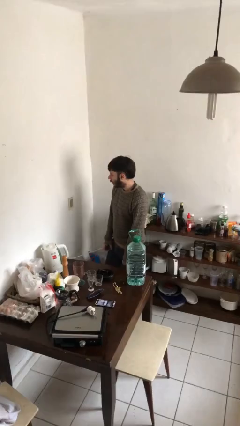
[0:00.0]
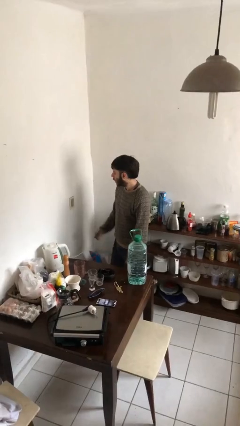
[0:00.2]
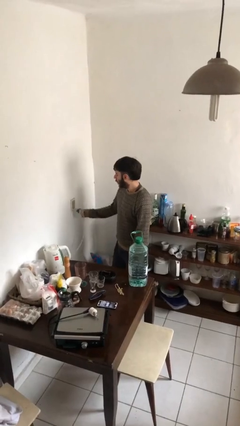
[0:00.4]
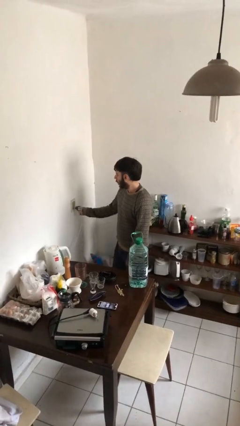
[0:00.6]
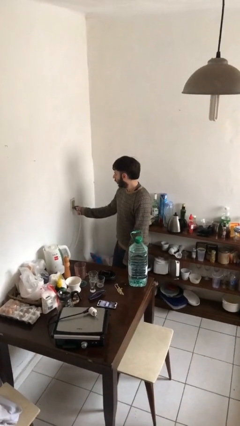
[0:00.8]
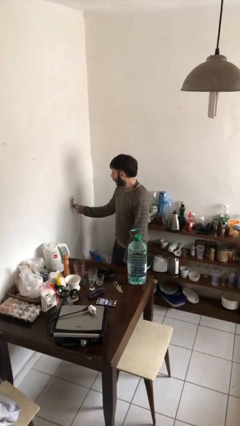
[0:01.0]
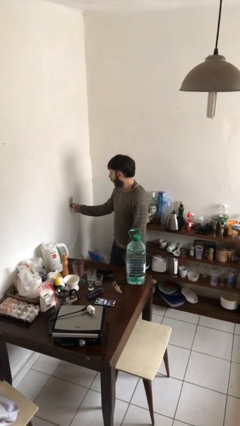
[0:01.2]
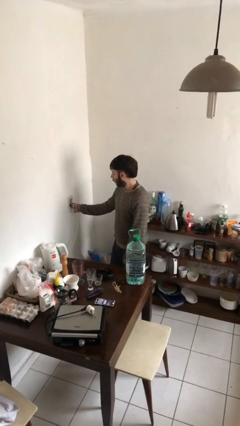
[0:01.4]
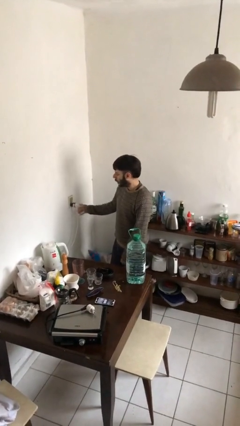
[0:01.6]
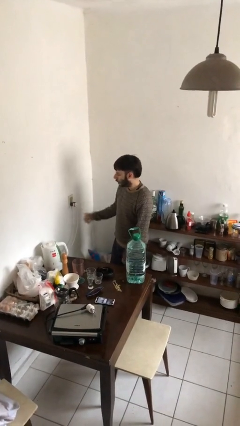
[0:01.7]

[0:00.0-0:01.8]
person plugs into electrical socket

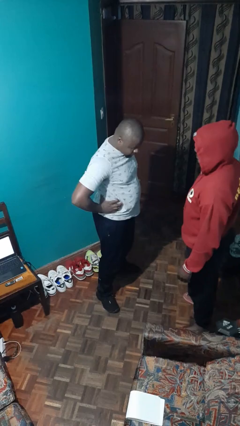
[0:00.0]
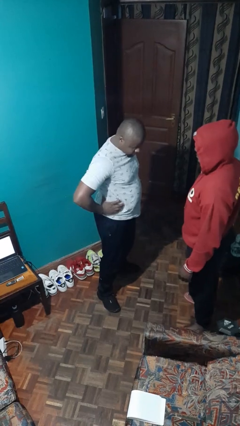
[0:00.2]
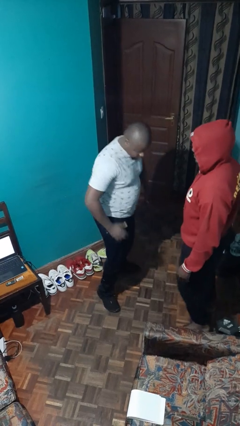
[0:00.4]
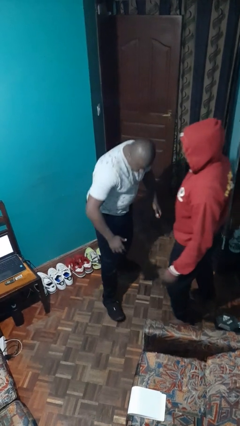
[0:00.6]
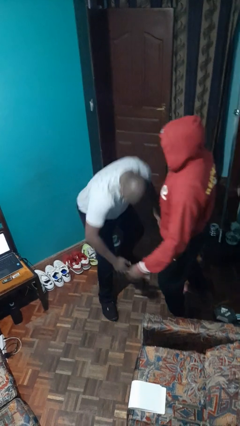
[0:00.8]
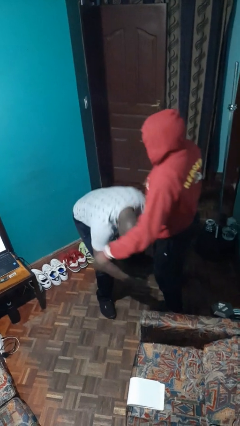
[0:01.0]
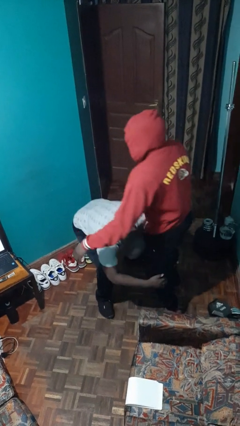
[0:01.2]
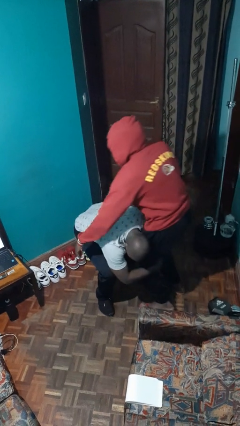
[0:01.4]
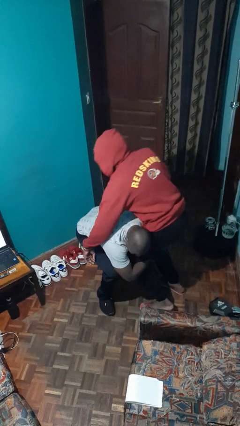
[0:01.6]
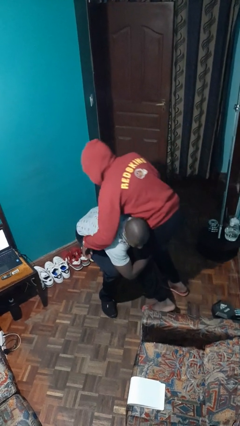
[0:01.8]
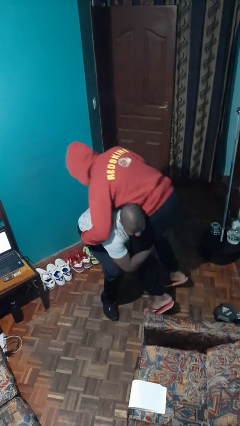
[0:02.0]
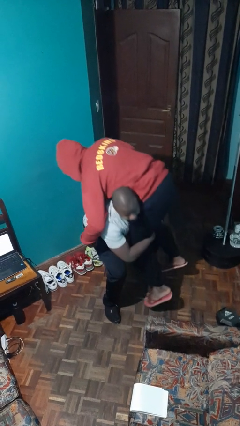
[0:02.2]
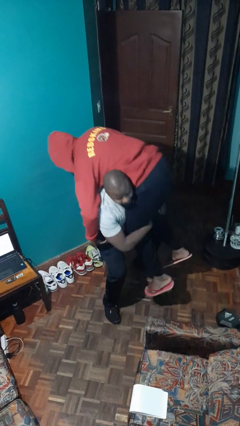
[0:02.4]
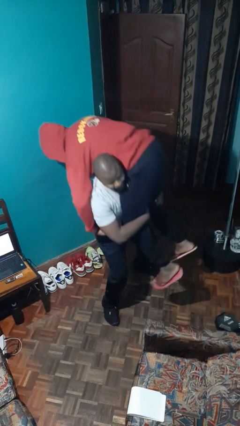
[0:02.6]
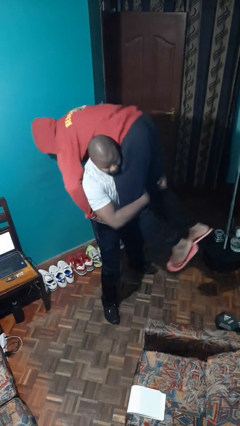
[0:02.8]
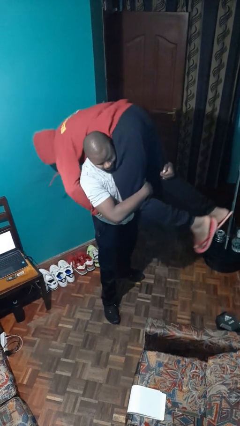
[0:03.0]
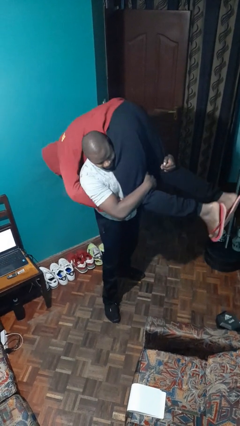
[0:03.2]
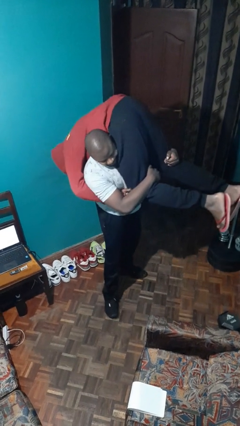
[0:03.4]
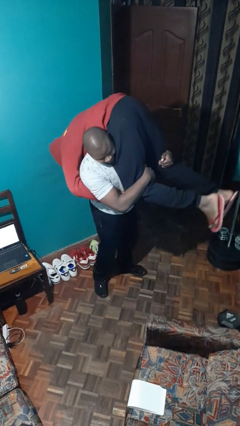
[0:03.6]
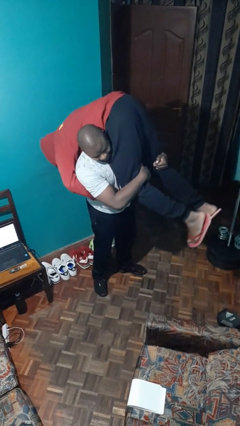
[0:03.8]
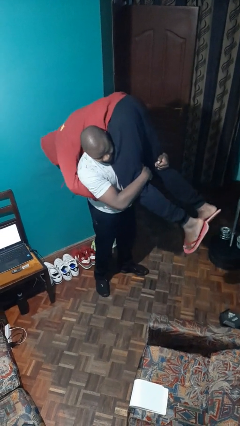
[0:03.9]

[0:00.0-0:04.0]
person carries person over shoulder

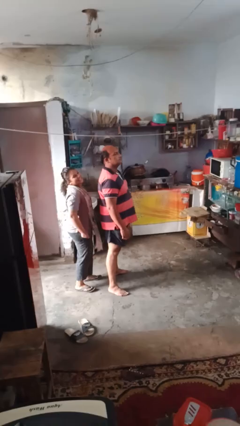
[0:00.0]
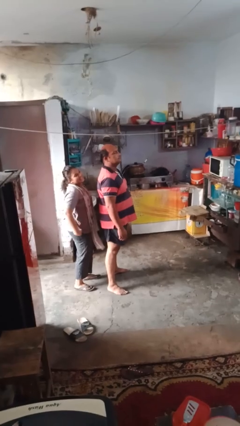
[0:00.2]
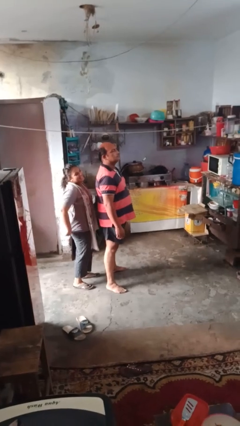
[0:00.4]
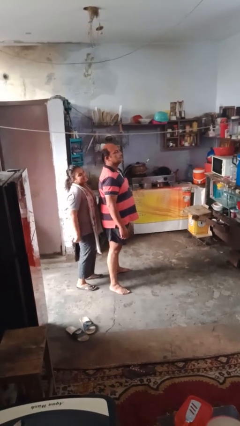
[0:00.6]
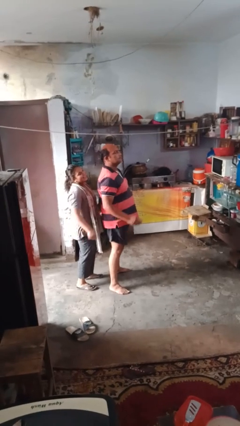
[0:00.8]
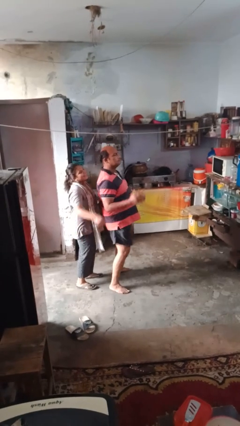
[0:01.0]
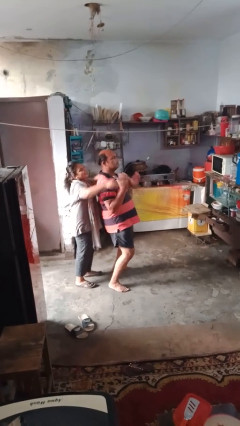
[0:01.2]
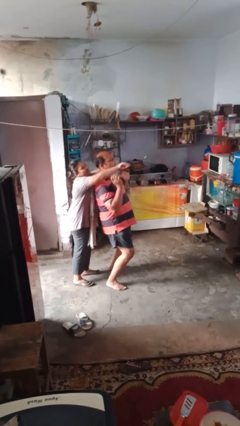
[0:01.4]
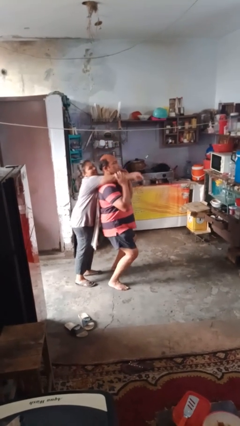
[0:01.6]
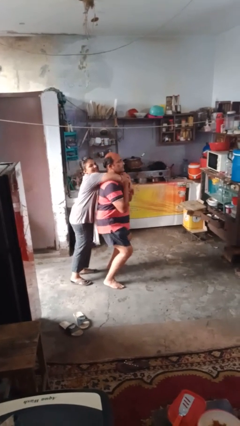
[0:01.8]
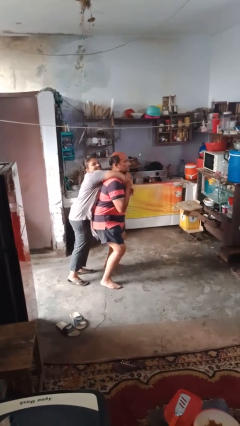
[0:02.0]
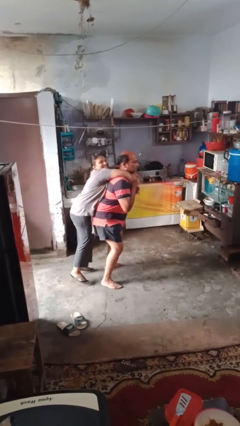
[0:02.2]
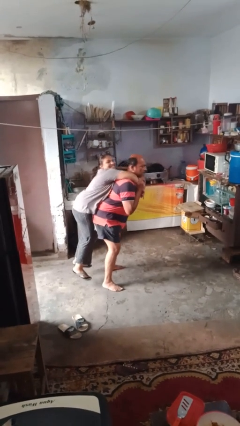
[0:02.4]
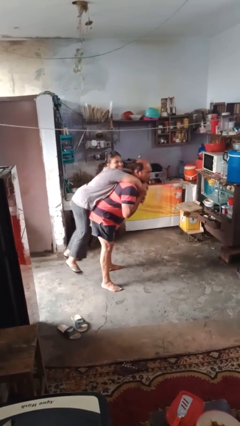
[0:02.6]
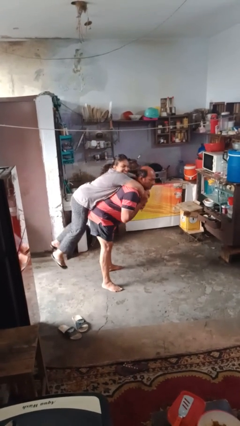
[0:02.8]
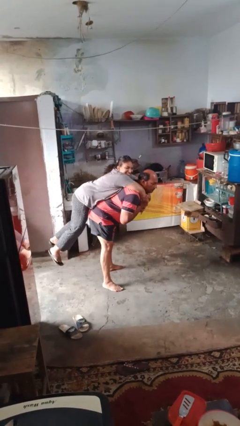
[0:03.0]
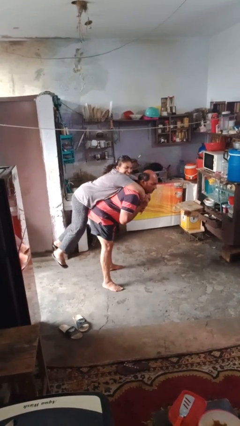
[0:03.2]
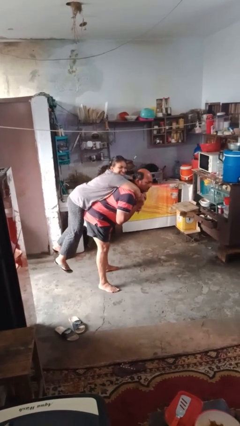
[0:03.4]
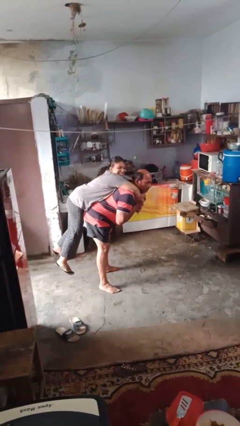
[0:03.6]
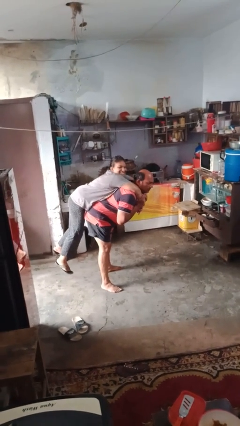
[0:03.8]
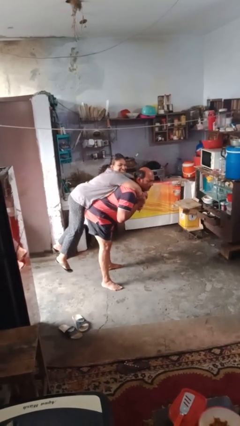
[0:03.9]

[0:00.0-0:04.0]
person carries person on shoulders

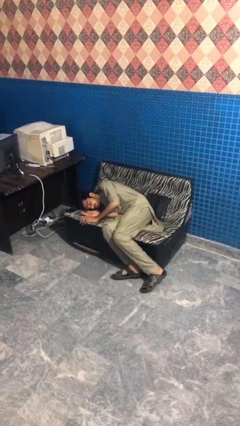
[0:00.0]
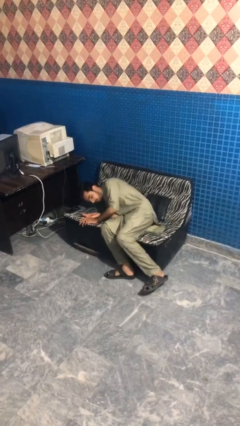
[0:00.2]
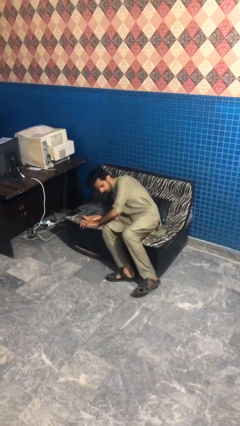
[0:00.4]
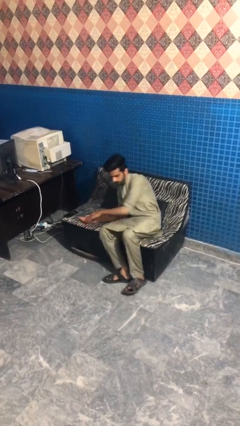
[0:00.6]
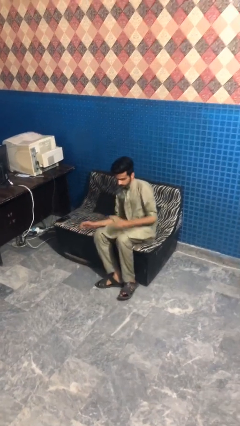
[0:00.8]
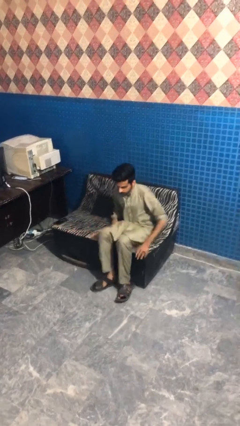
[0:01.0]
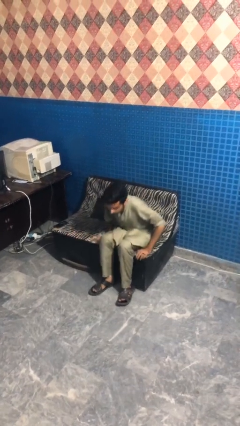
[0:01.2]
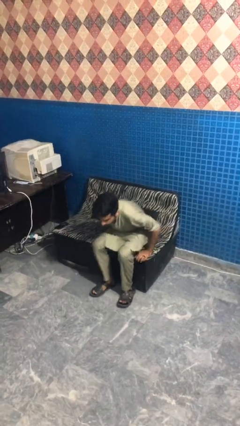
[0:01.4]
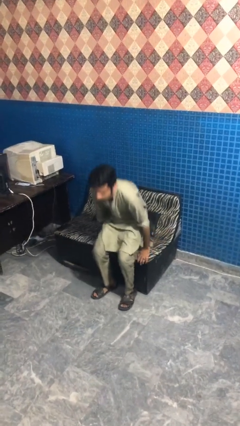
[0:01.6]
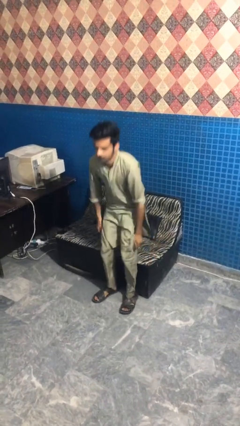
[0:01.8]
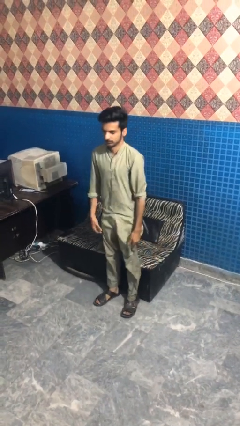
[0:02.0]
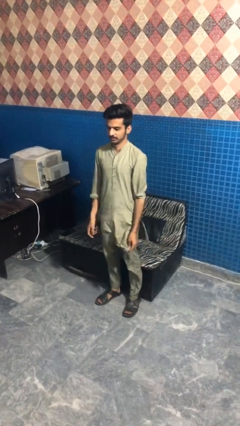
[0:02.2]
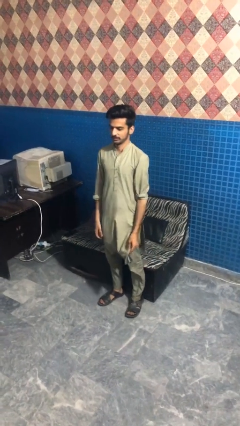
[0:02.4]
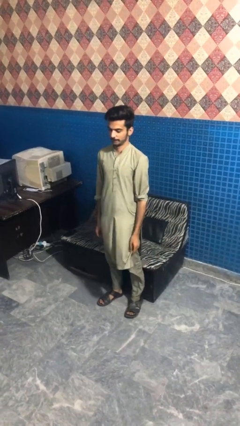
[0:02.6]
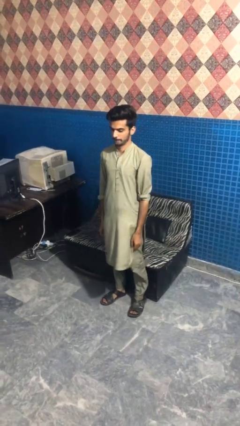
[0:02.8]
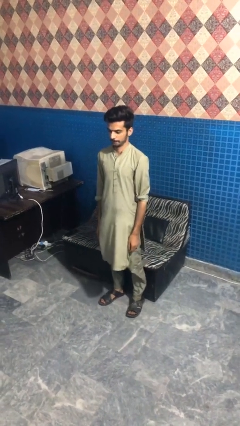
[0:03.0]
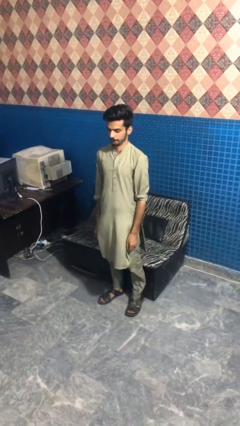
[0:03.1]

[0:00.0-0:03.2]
person stands up

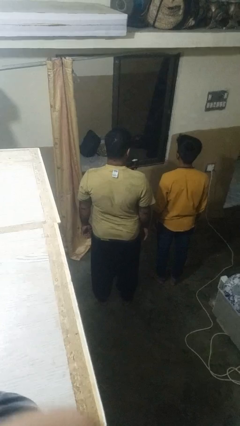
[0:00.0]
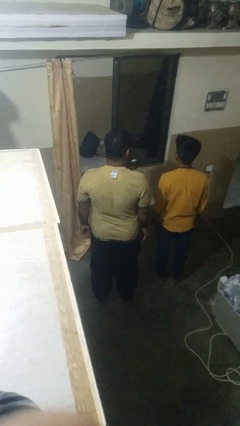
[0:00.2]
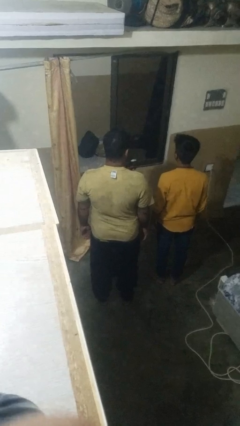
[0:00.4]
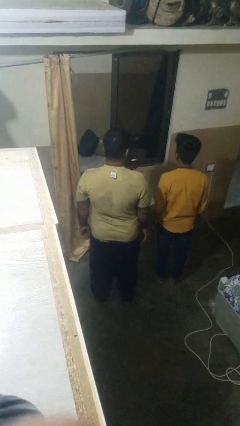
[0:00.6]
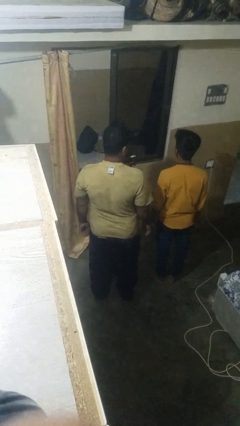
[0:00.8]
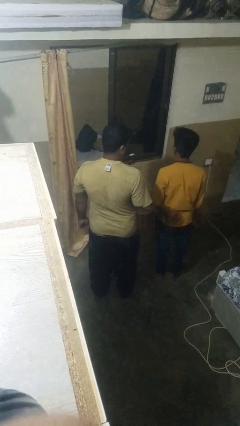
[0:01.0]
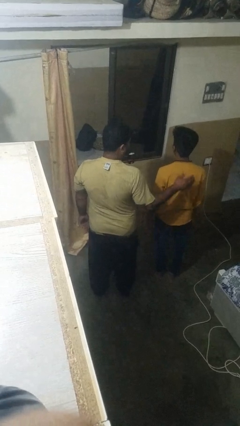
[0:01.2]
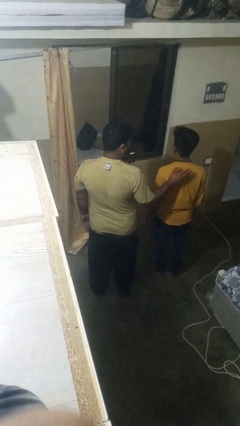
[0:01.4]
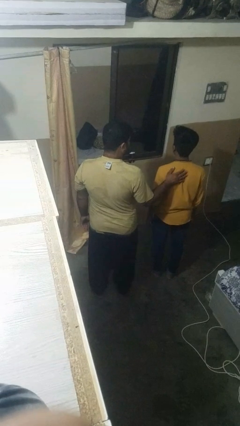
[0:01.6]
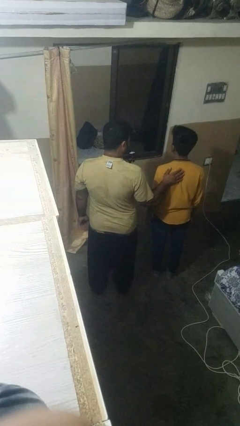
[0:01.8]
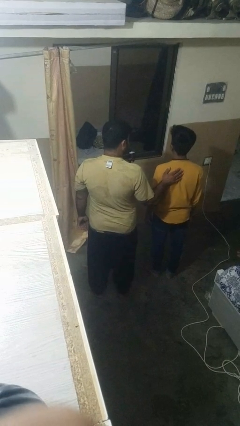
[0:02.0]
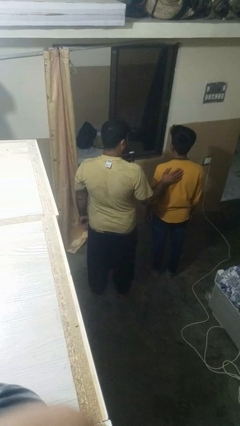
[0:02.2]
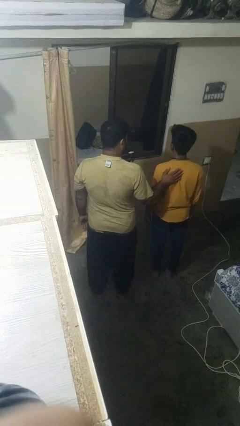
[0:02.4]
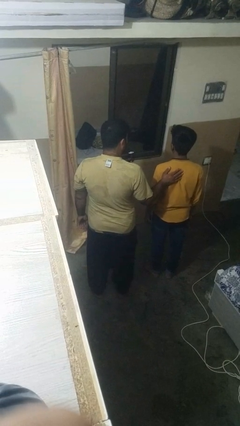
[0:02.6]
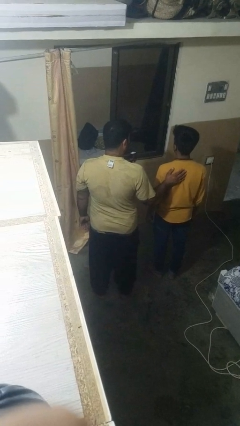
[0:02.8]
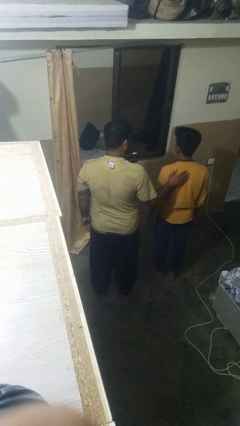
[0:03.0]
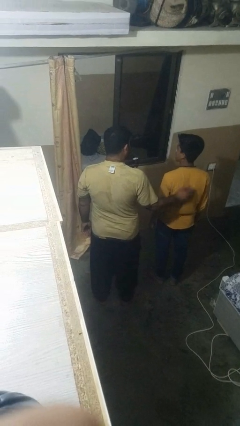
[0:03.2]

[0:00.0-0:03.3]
person touches back of person

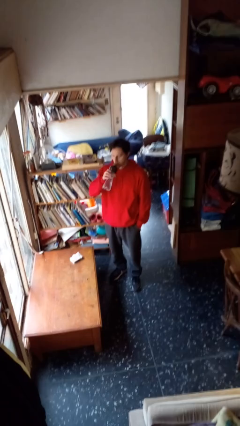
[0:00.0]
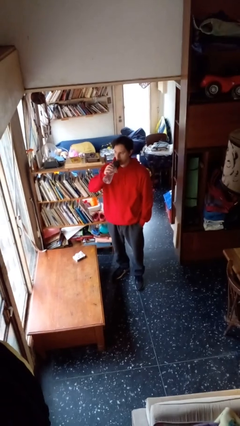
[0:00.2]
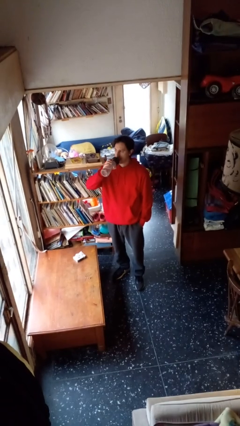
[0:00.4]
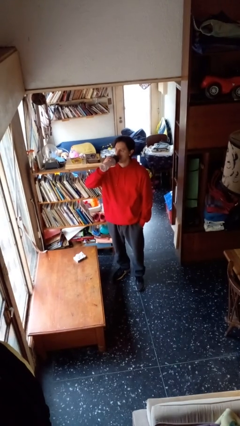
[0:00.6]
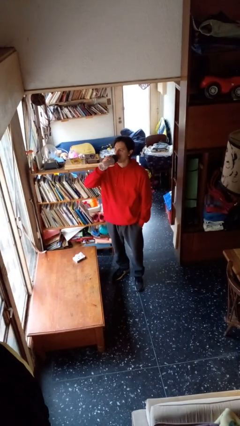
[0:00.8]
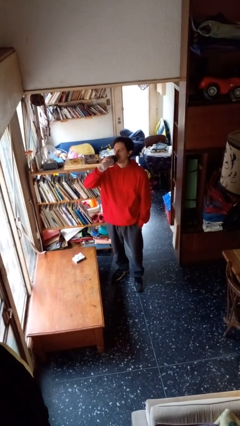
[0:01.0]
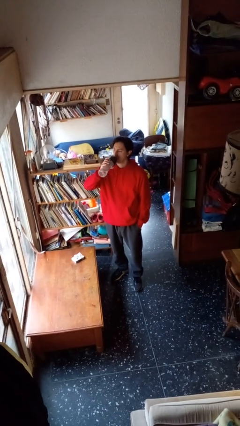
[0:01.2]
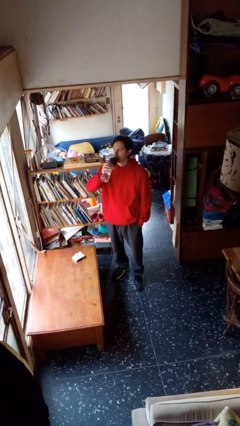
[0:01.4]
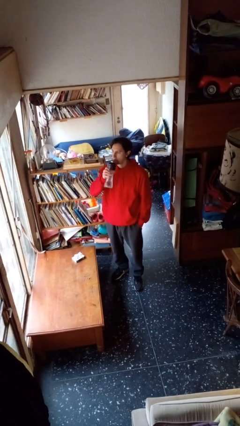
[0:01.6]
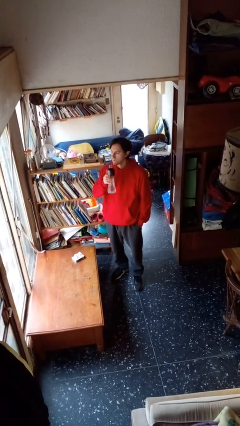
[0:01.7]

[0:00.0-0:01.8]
person drinks from bottle
